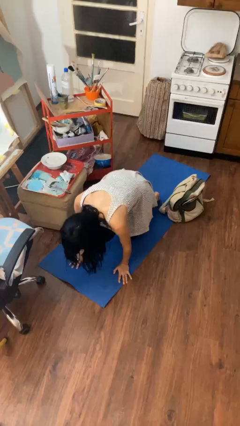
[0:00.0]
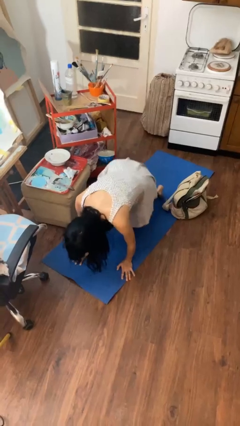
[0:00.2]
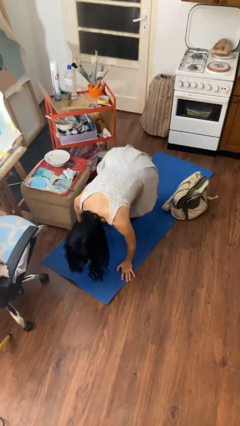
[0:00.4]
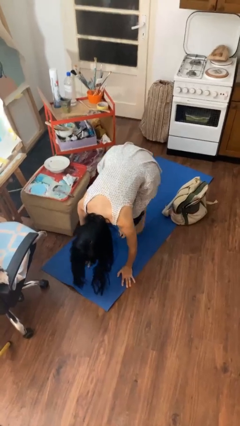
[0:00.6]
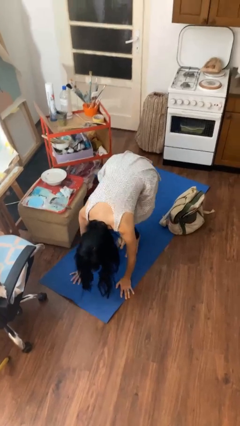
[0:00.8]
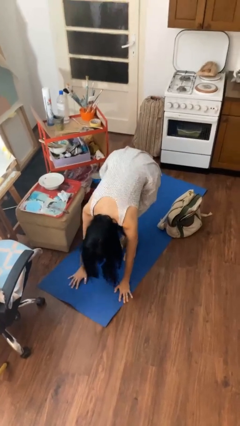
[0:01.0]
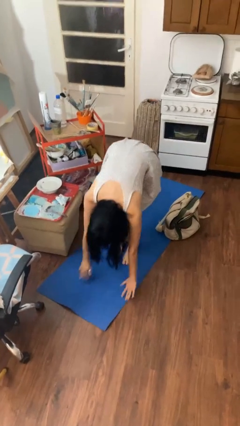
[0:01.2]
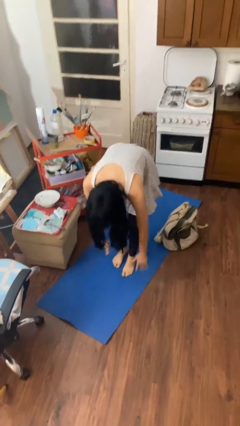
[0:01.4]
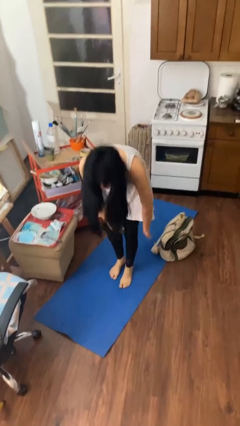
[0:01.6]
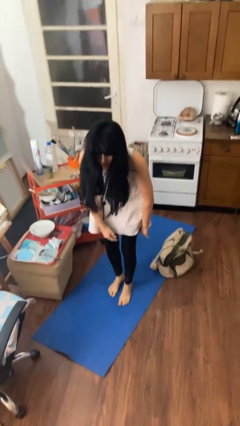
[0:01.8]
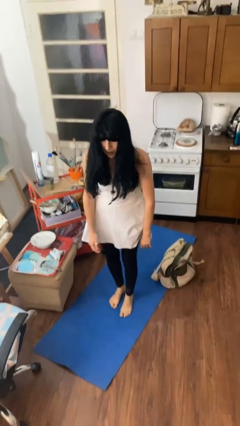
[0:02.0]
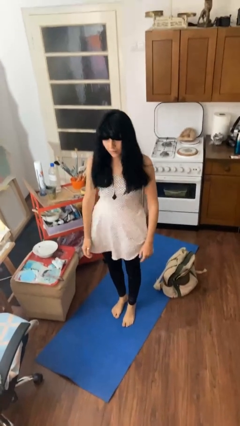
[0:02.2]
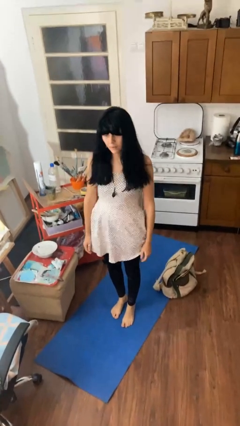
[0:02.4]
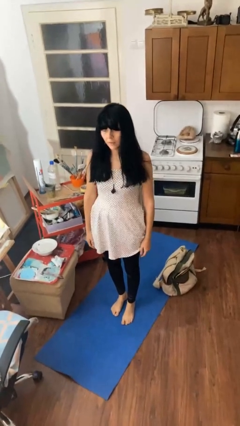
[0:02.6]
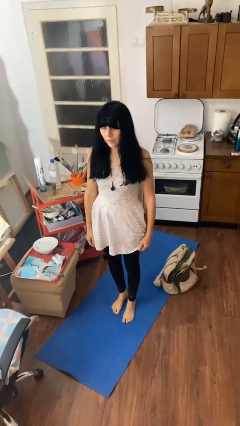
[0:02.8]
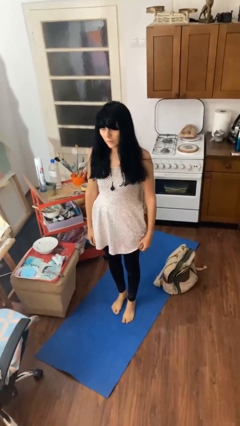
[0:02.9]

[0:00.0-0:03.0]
person stands up from floor

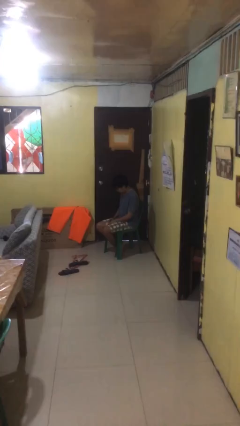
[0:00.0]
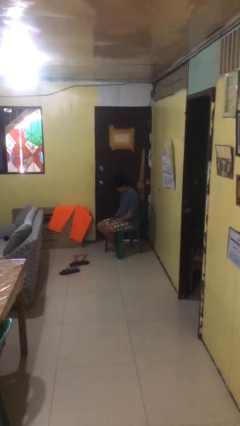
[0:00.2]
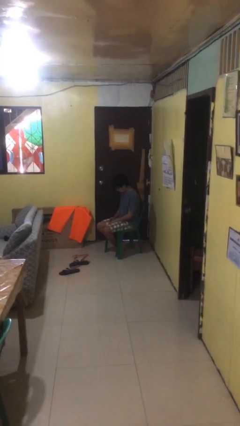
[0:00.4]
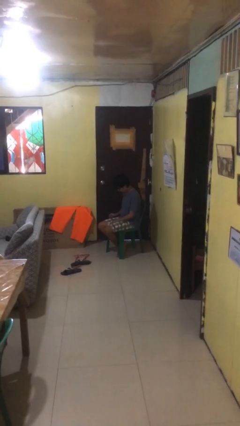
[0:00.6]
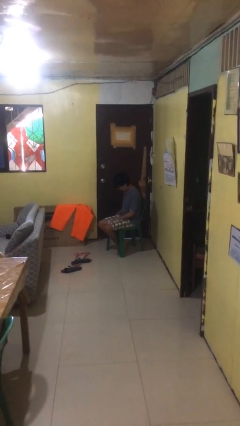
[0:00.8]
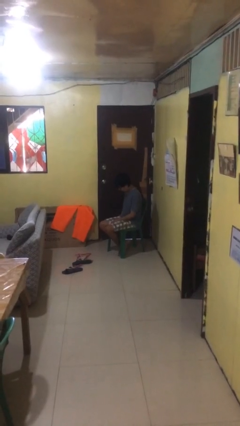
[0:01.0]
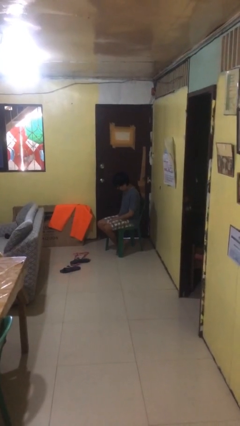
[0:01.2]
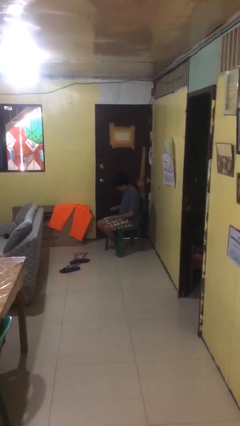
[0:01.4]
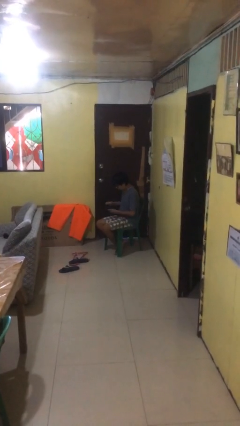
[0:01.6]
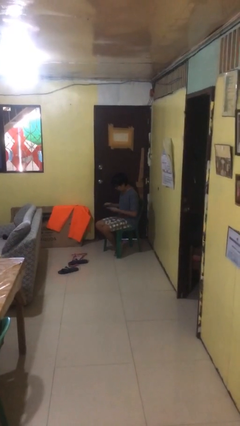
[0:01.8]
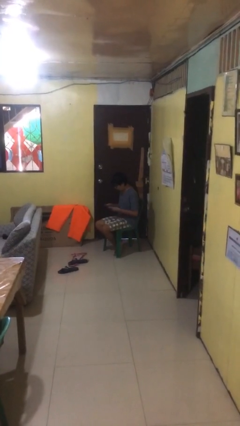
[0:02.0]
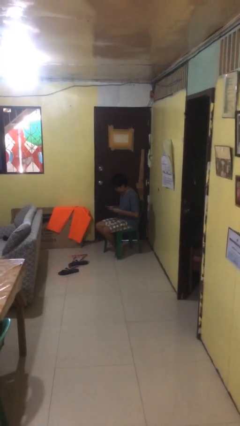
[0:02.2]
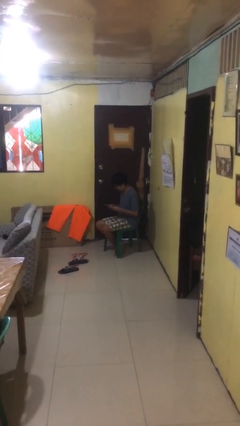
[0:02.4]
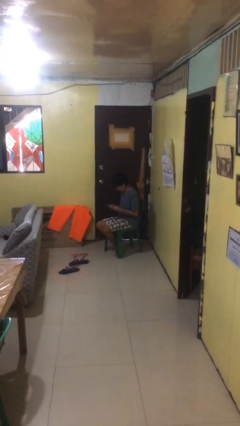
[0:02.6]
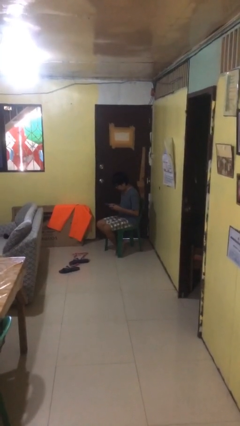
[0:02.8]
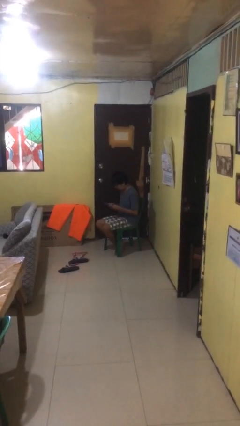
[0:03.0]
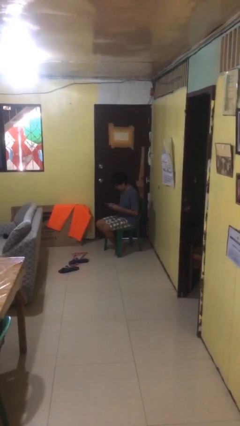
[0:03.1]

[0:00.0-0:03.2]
person takes phone from pocket

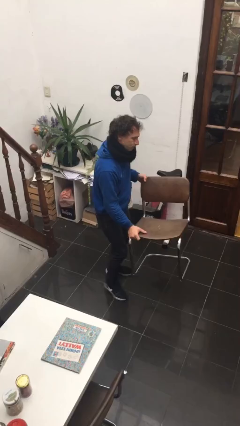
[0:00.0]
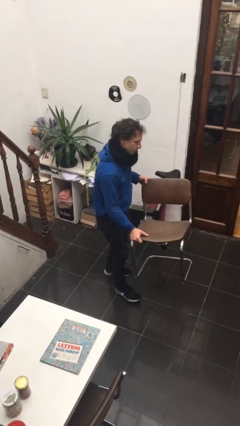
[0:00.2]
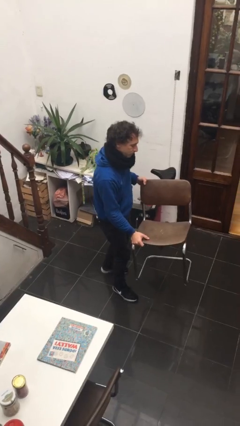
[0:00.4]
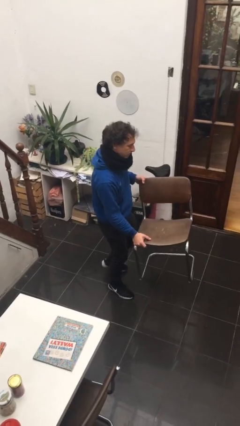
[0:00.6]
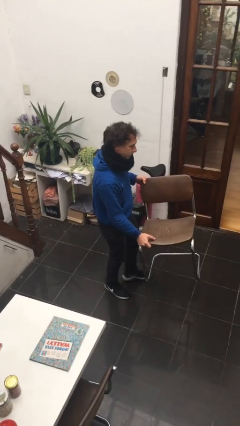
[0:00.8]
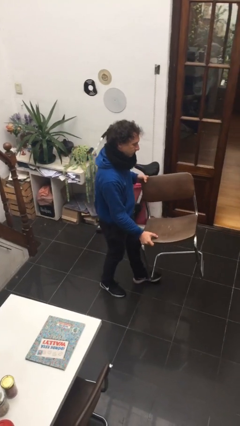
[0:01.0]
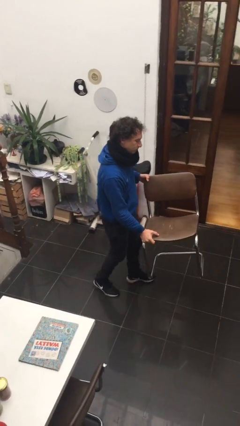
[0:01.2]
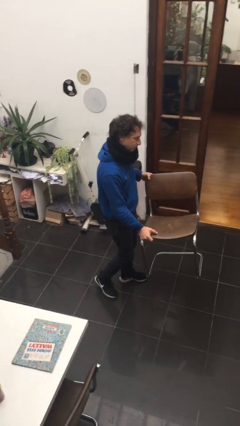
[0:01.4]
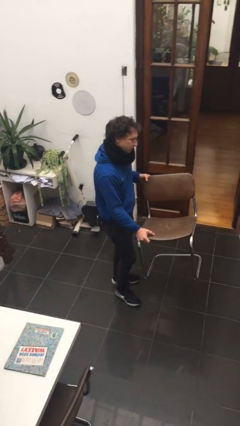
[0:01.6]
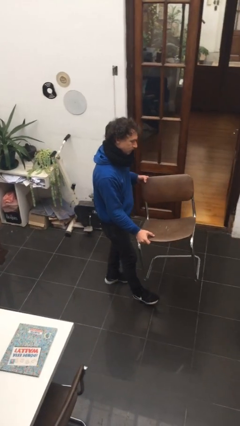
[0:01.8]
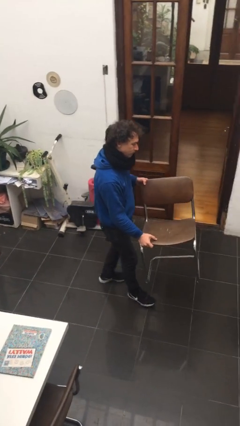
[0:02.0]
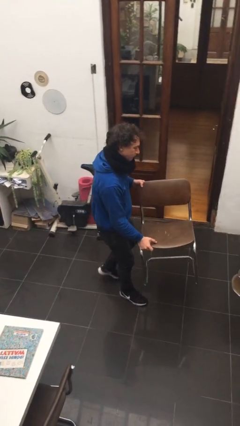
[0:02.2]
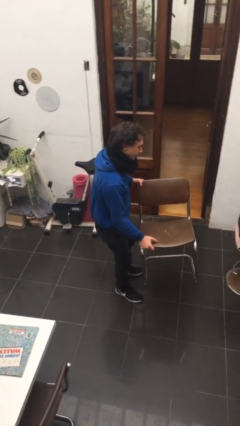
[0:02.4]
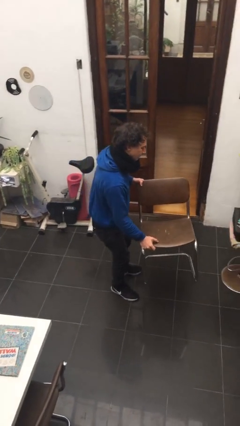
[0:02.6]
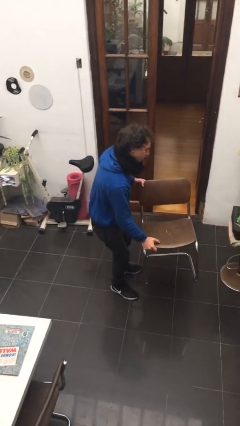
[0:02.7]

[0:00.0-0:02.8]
person carries heavy object

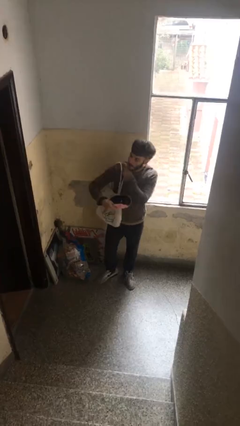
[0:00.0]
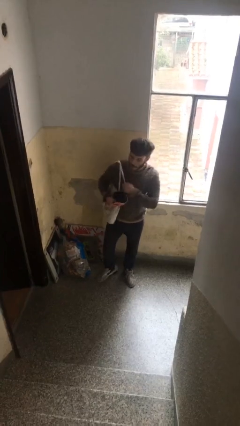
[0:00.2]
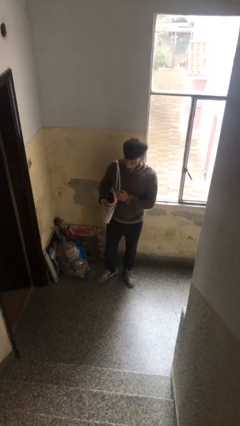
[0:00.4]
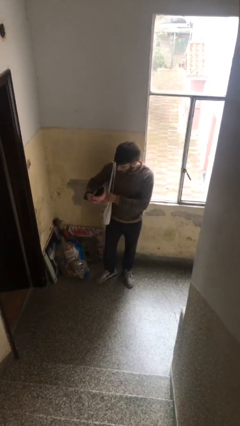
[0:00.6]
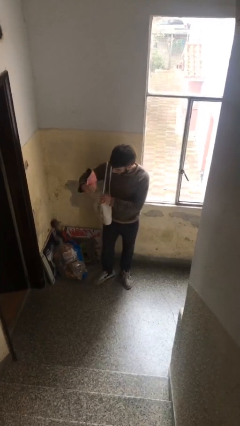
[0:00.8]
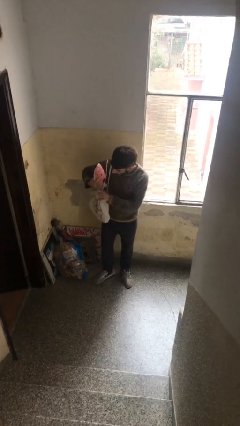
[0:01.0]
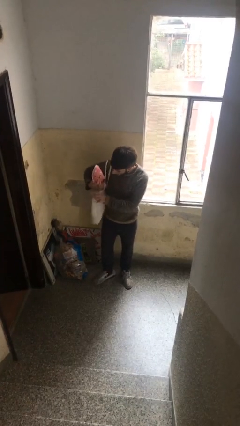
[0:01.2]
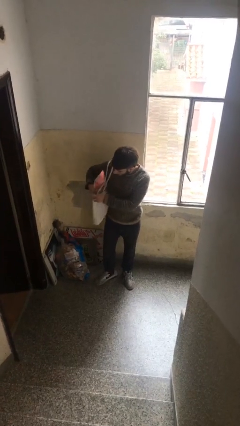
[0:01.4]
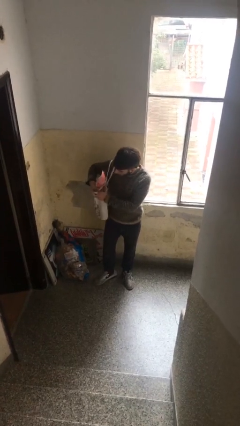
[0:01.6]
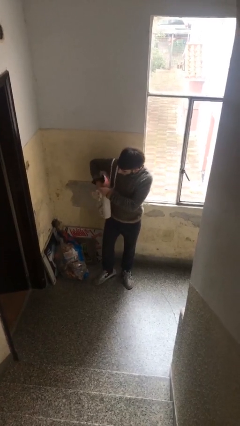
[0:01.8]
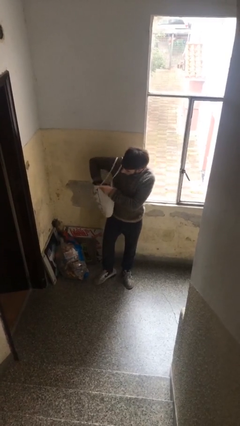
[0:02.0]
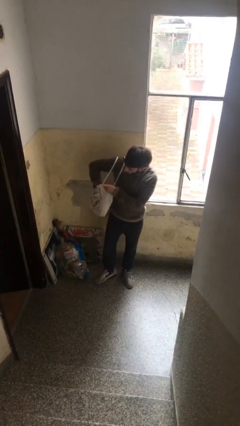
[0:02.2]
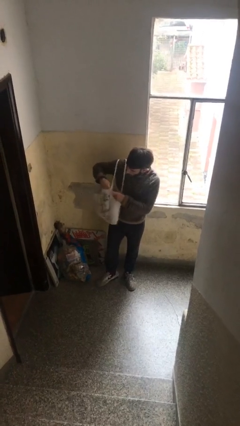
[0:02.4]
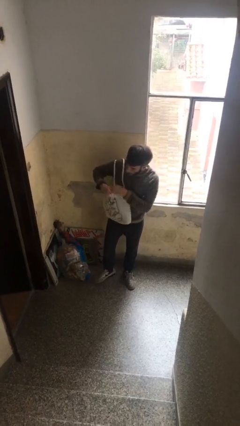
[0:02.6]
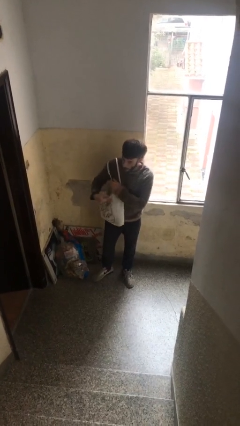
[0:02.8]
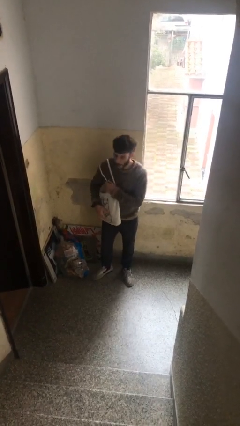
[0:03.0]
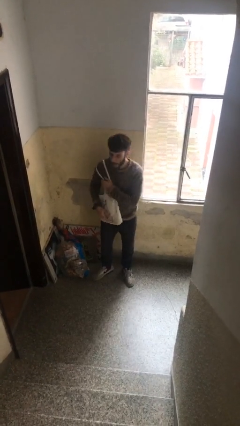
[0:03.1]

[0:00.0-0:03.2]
person puts object into purse

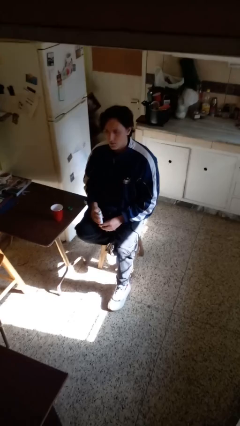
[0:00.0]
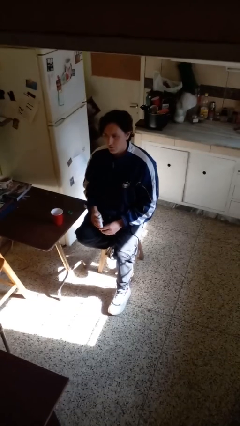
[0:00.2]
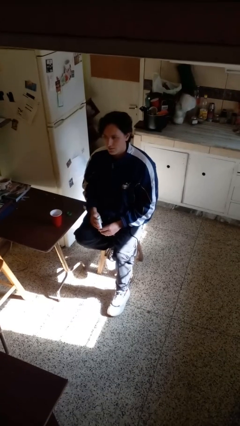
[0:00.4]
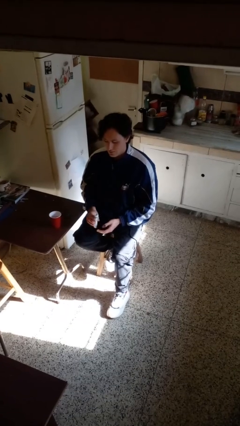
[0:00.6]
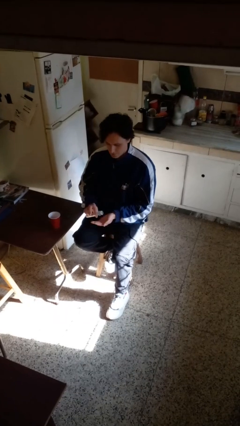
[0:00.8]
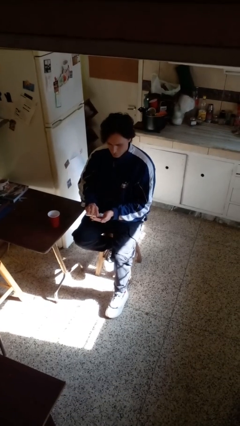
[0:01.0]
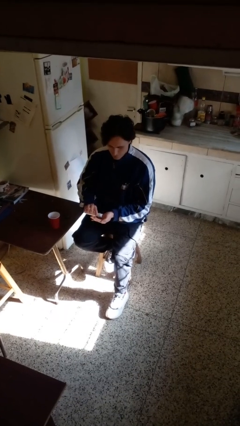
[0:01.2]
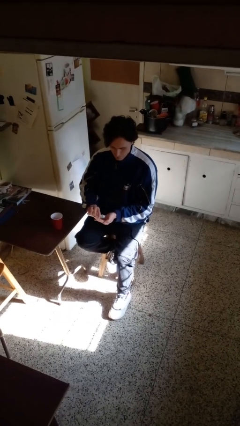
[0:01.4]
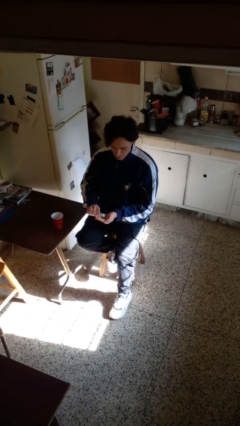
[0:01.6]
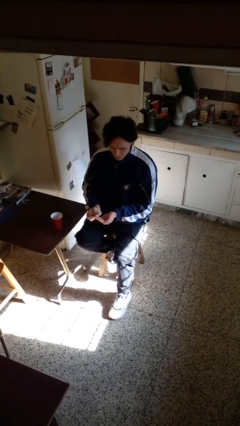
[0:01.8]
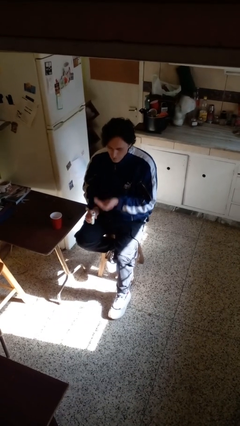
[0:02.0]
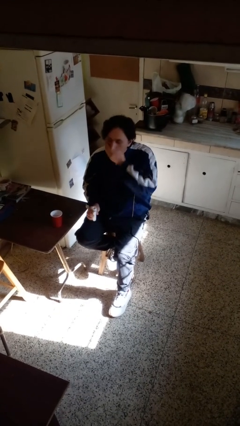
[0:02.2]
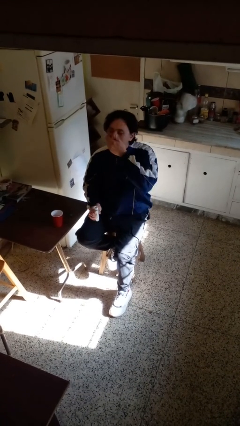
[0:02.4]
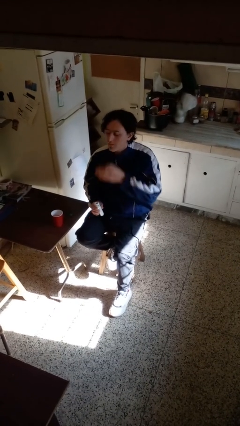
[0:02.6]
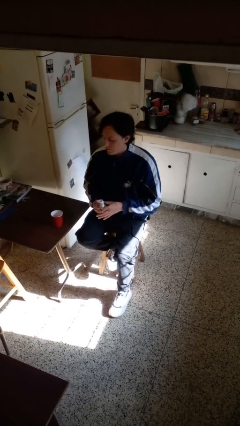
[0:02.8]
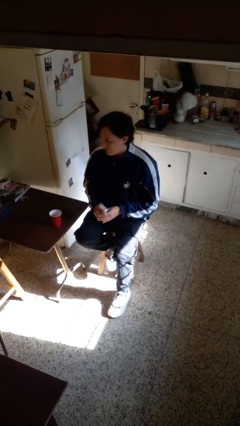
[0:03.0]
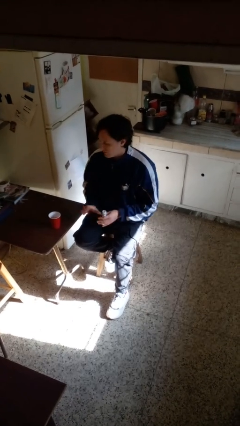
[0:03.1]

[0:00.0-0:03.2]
person takes medicine pills

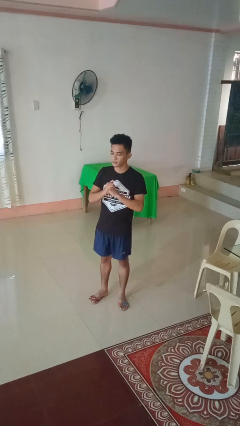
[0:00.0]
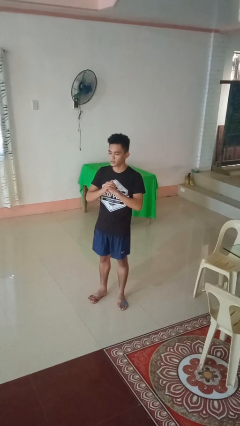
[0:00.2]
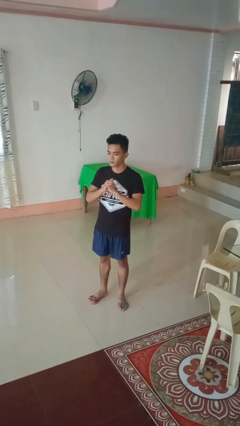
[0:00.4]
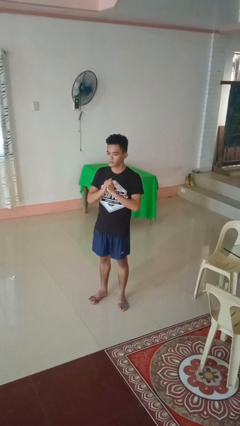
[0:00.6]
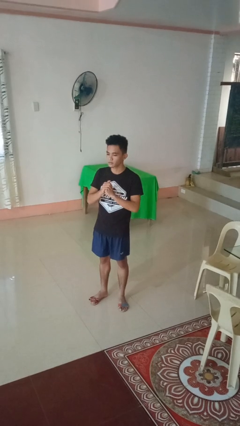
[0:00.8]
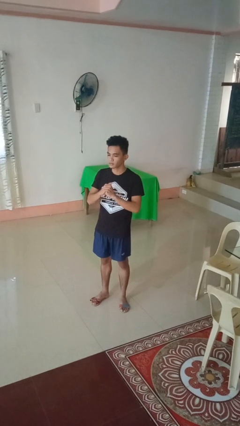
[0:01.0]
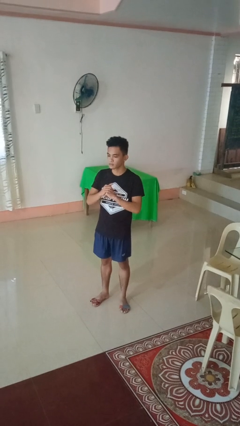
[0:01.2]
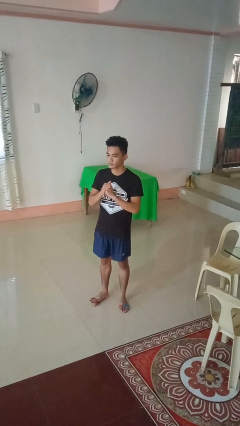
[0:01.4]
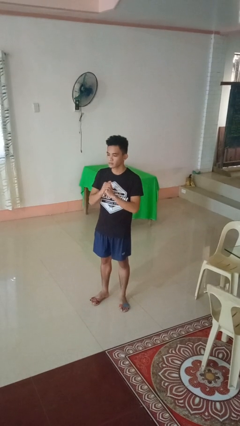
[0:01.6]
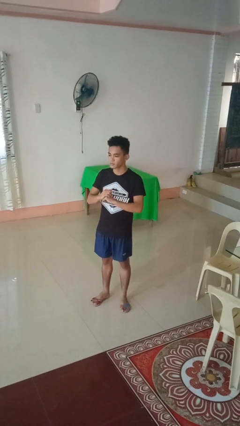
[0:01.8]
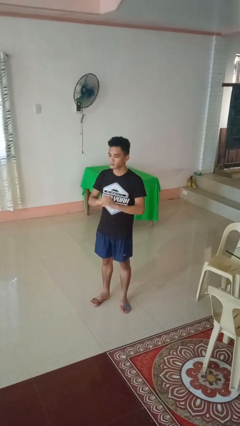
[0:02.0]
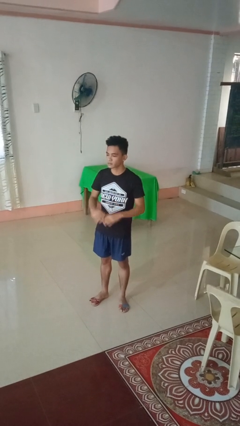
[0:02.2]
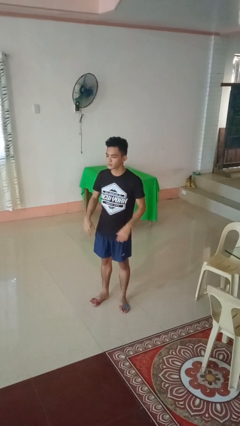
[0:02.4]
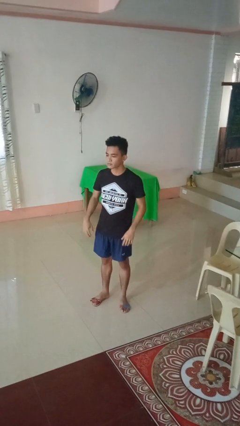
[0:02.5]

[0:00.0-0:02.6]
person cracks knuckles
